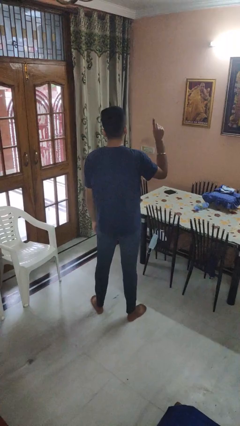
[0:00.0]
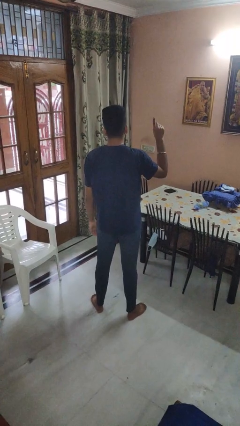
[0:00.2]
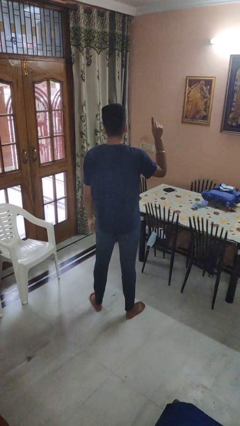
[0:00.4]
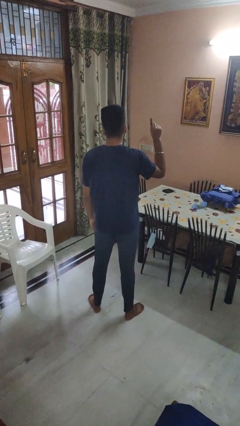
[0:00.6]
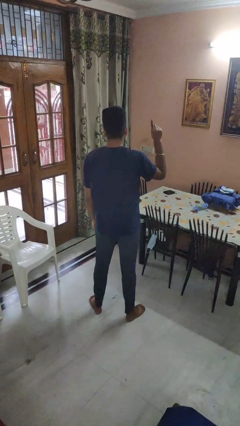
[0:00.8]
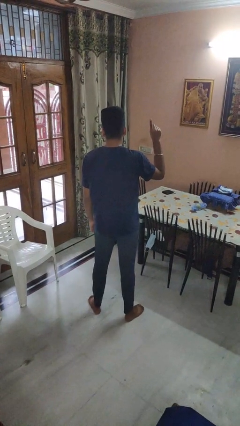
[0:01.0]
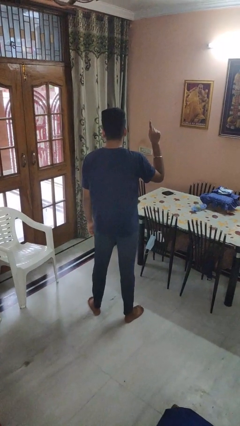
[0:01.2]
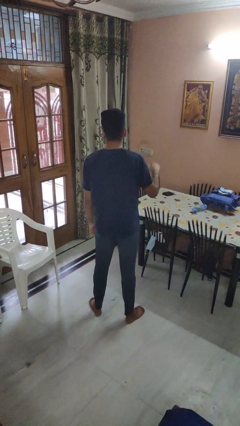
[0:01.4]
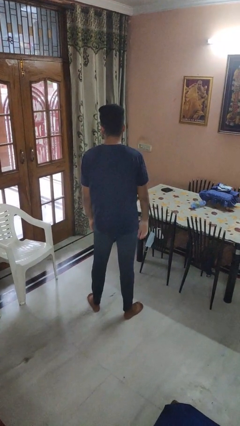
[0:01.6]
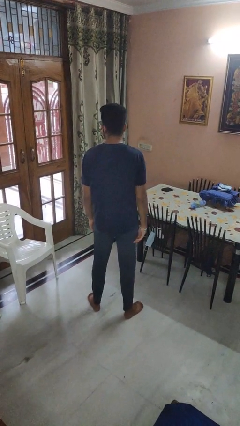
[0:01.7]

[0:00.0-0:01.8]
person gestures number one

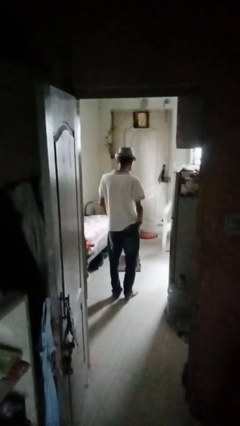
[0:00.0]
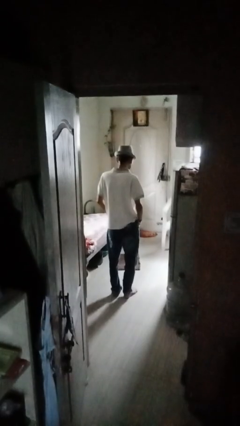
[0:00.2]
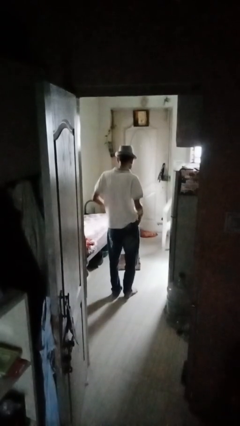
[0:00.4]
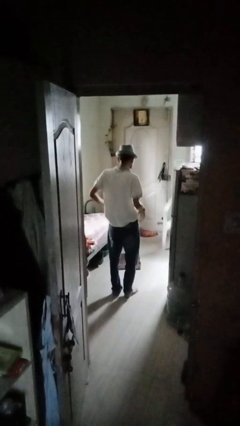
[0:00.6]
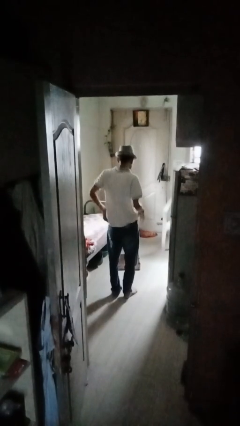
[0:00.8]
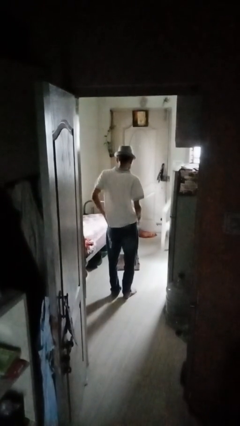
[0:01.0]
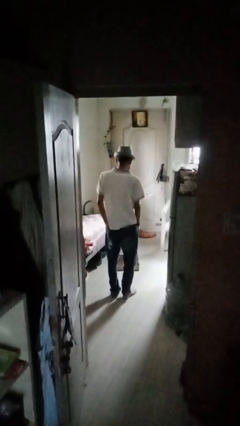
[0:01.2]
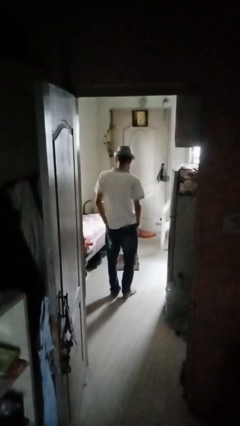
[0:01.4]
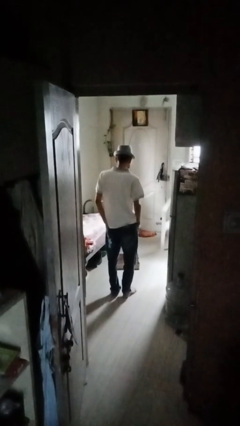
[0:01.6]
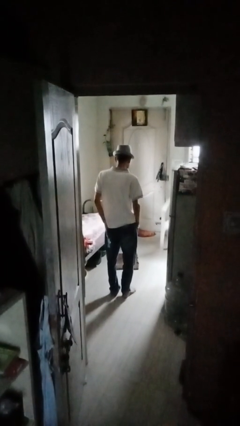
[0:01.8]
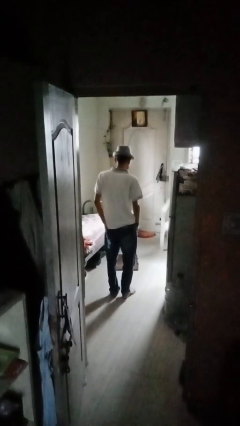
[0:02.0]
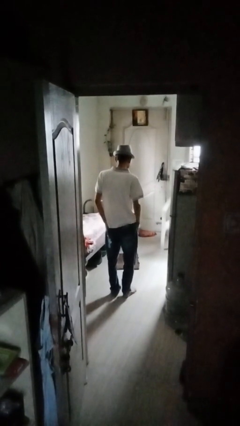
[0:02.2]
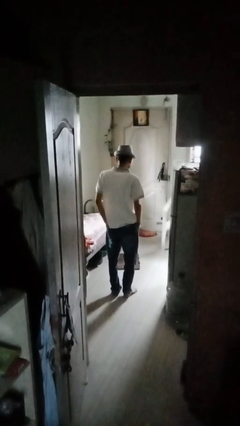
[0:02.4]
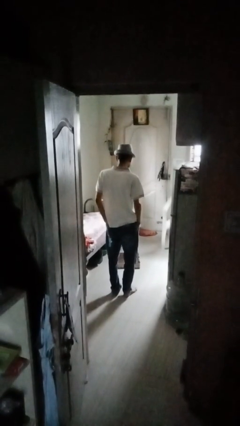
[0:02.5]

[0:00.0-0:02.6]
person puts hands in back pockets

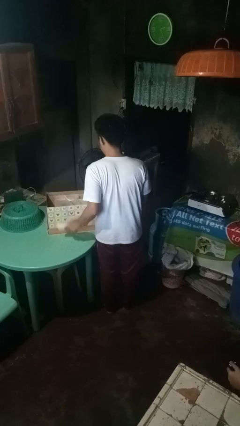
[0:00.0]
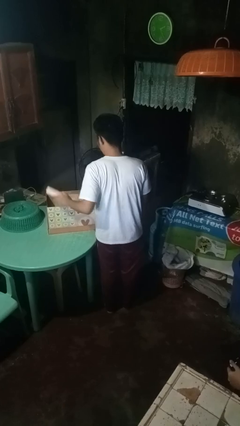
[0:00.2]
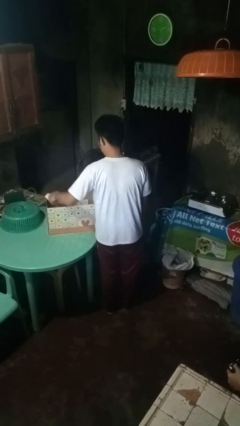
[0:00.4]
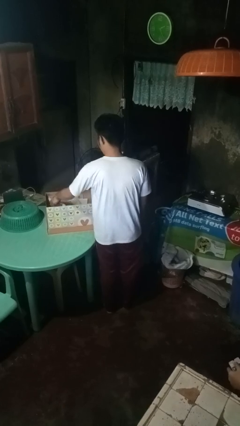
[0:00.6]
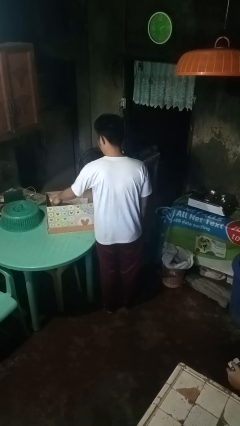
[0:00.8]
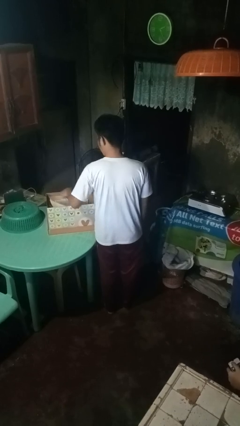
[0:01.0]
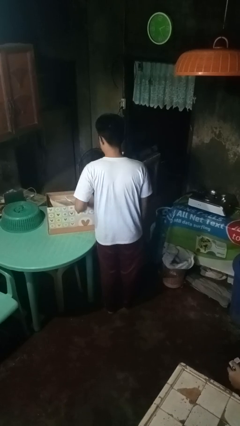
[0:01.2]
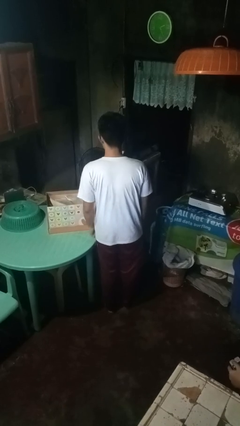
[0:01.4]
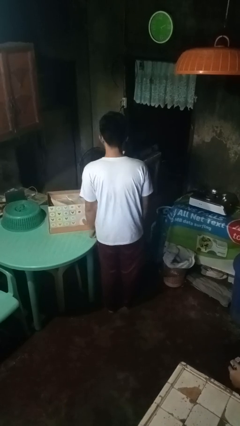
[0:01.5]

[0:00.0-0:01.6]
person puts object into box

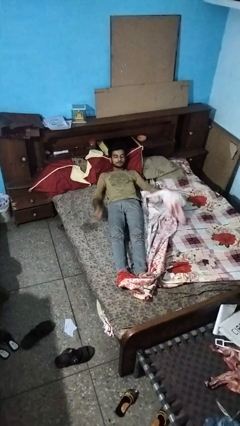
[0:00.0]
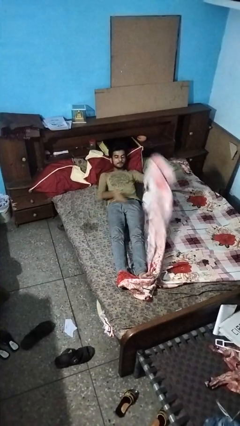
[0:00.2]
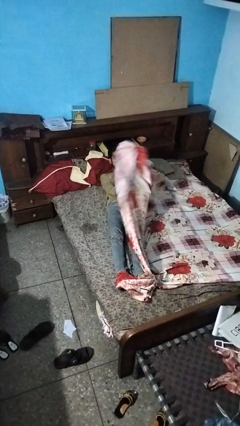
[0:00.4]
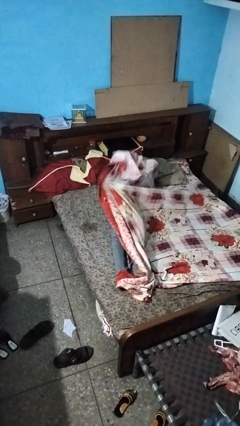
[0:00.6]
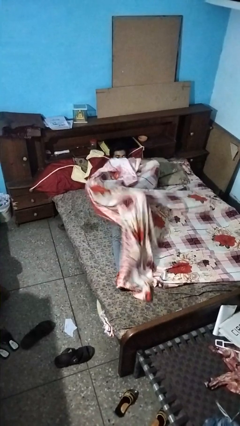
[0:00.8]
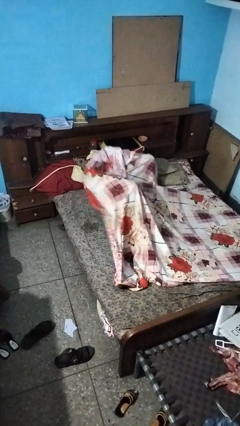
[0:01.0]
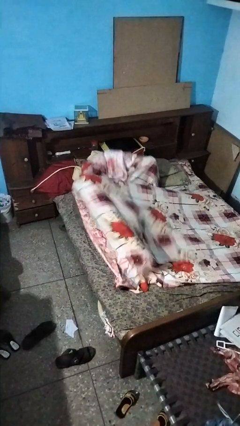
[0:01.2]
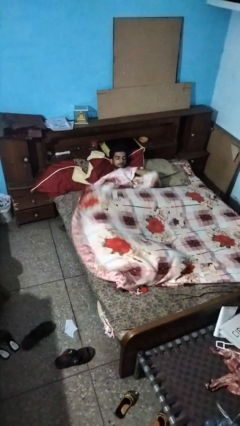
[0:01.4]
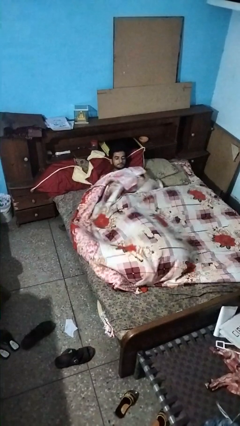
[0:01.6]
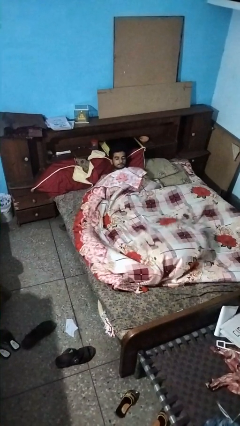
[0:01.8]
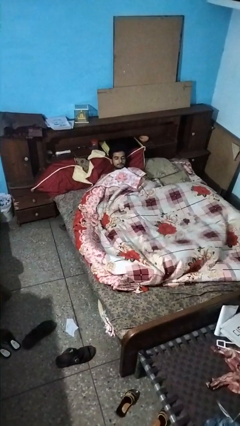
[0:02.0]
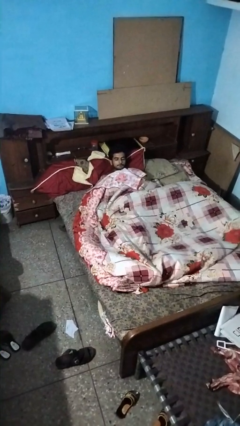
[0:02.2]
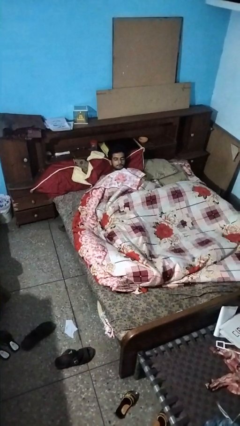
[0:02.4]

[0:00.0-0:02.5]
person covers with bedsheets

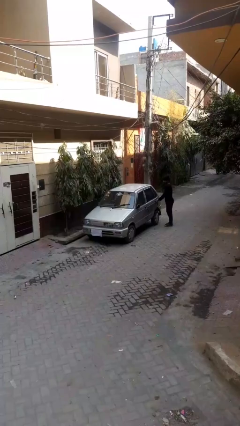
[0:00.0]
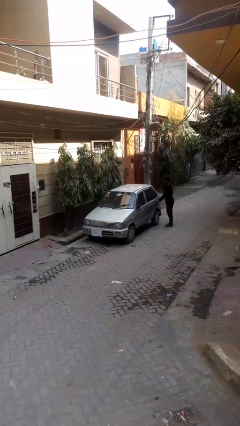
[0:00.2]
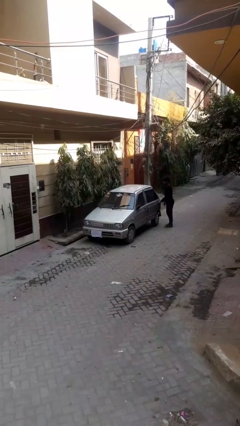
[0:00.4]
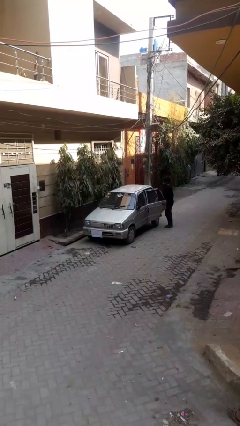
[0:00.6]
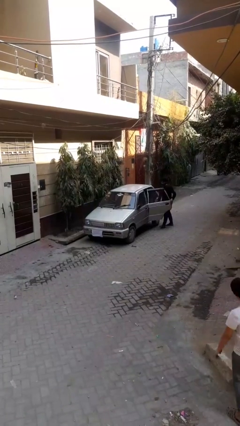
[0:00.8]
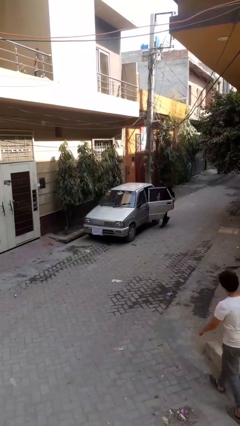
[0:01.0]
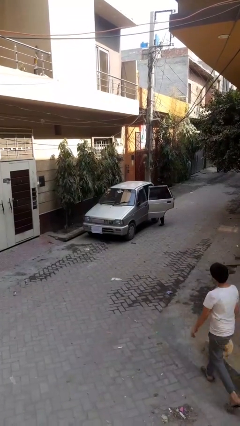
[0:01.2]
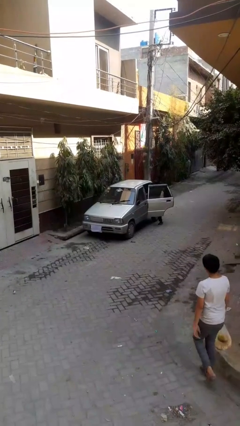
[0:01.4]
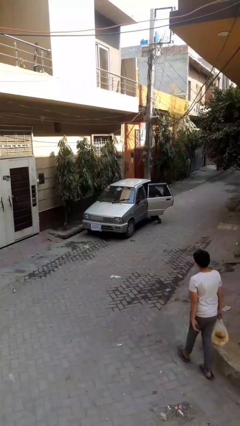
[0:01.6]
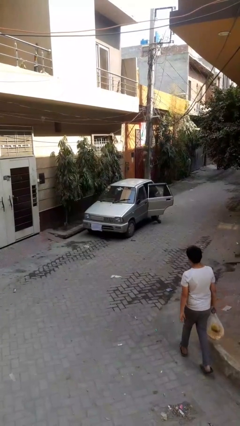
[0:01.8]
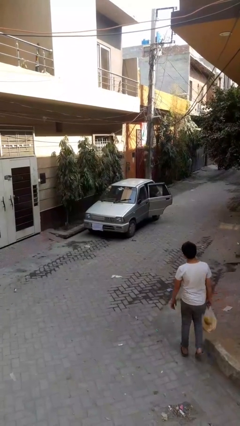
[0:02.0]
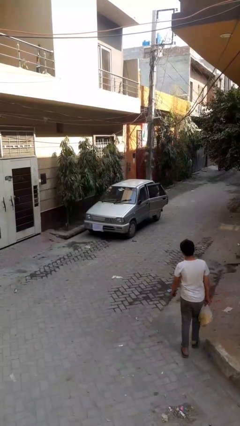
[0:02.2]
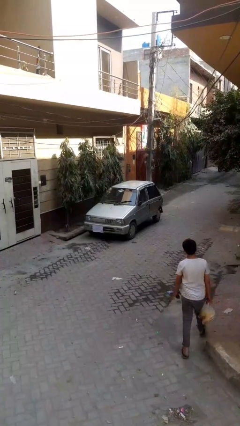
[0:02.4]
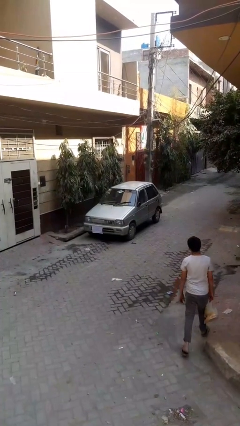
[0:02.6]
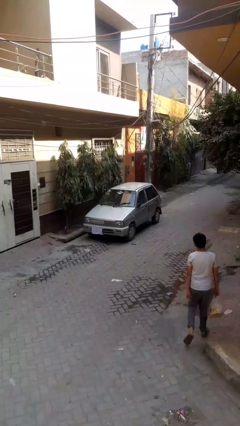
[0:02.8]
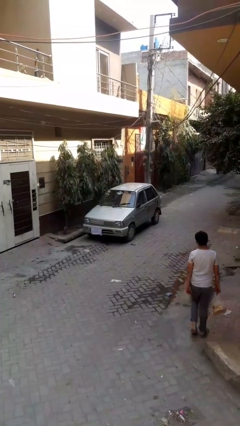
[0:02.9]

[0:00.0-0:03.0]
car picks up person

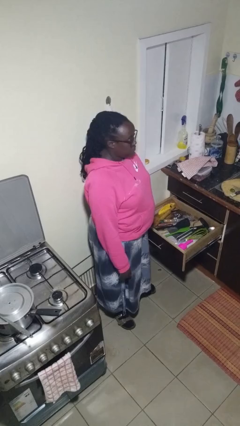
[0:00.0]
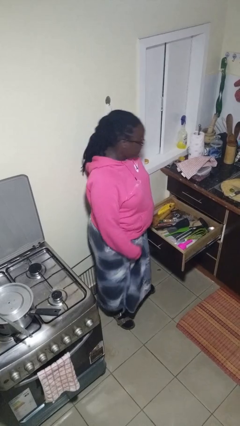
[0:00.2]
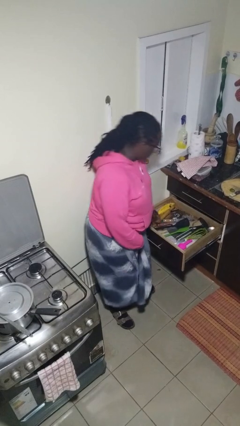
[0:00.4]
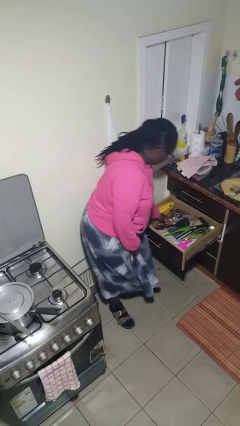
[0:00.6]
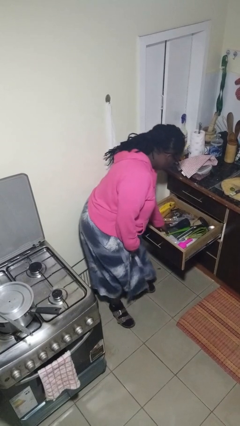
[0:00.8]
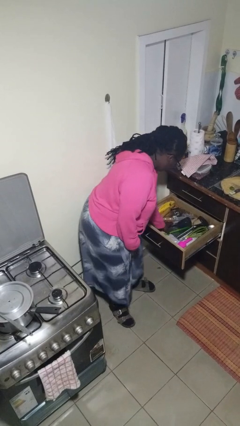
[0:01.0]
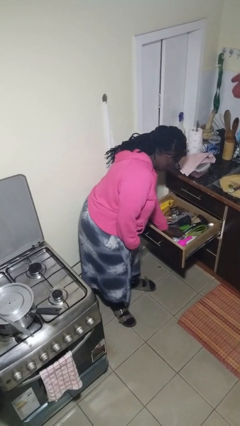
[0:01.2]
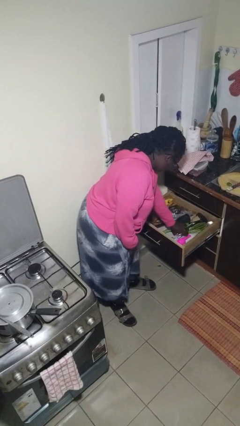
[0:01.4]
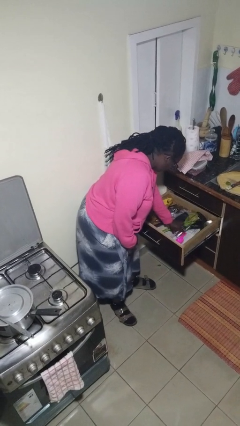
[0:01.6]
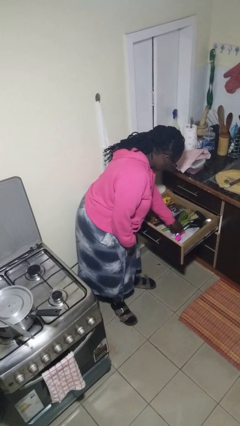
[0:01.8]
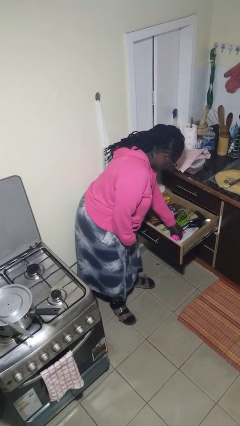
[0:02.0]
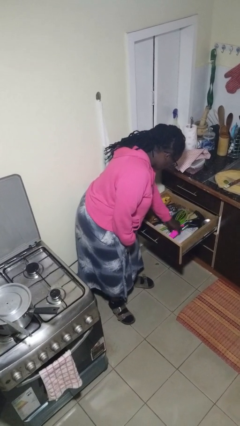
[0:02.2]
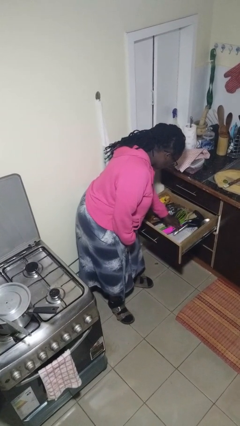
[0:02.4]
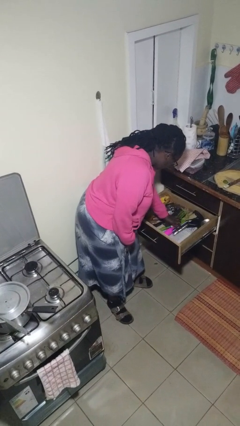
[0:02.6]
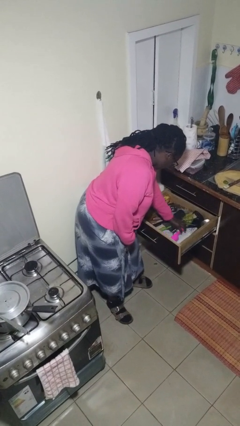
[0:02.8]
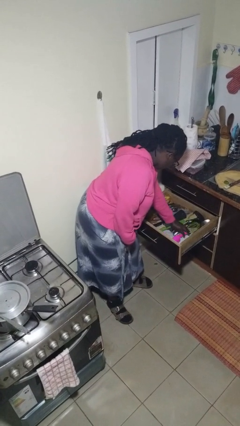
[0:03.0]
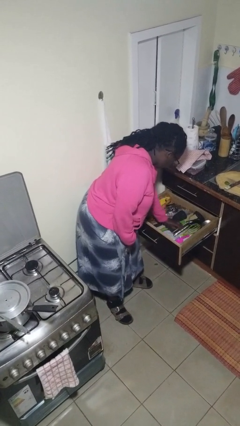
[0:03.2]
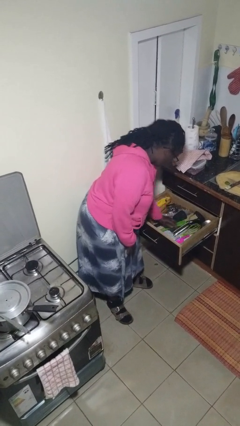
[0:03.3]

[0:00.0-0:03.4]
person searches in kitchen drawer

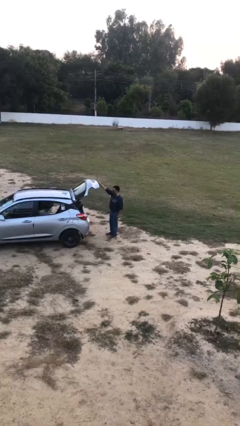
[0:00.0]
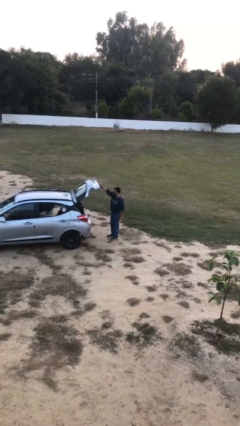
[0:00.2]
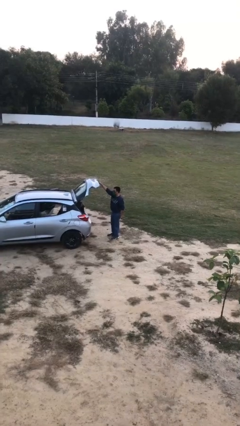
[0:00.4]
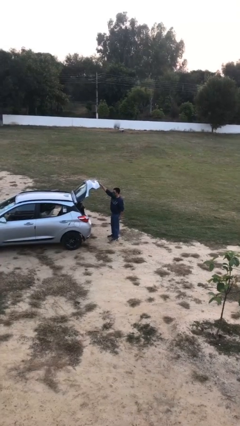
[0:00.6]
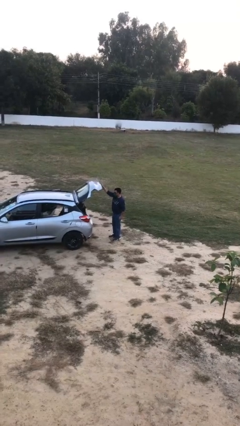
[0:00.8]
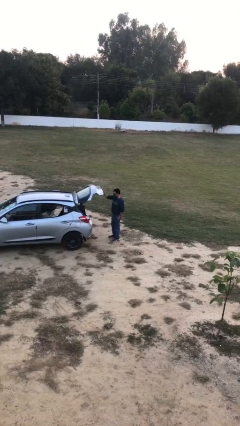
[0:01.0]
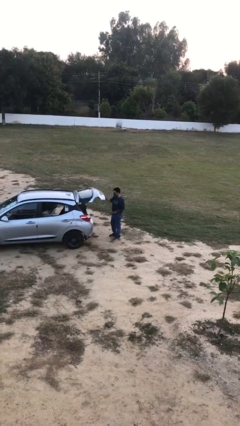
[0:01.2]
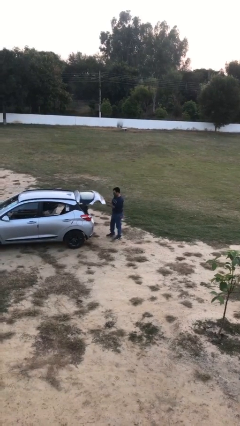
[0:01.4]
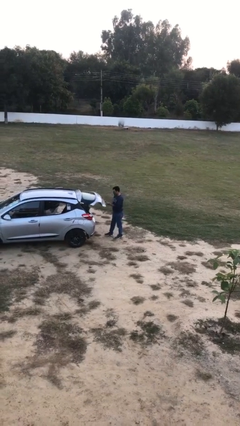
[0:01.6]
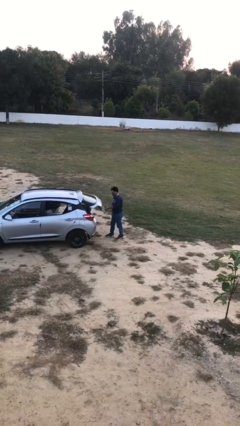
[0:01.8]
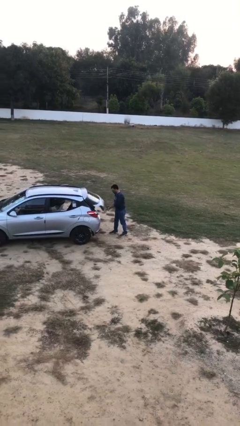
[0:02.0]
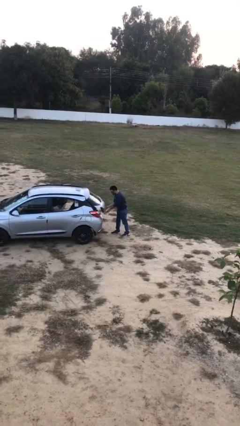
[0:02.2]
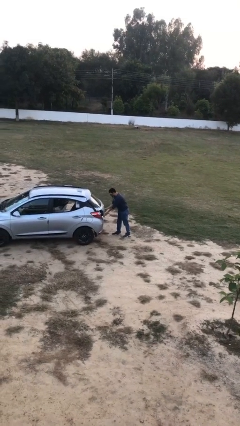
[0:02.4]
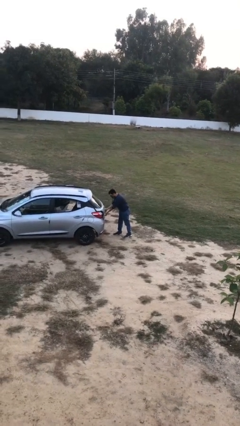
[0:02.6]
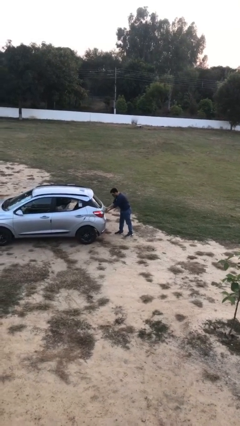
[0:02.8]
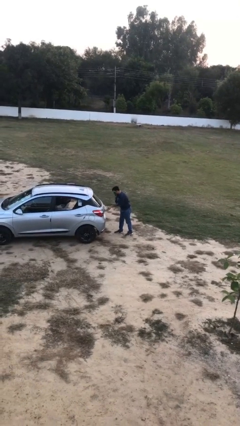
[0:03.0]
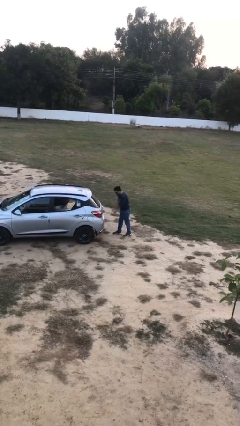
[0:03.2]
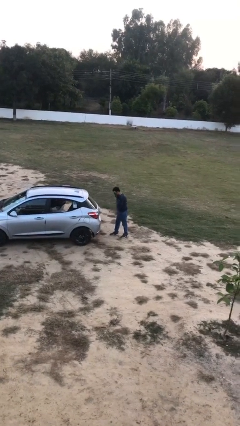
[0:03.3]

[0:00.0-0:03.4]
person closes car trunk
